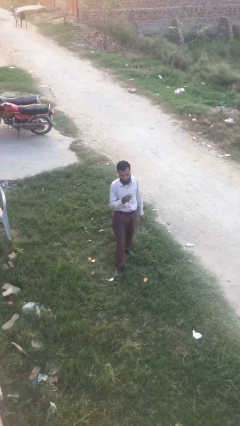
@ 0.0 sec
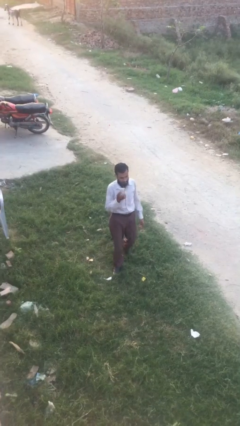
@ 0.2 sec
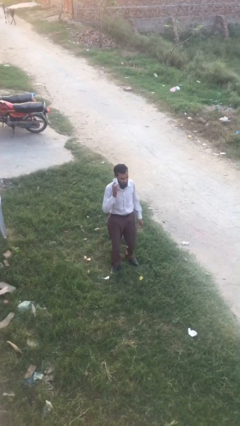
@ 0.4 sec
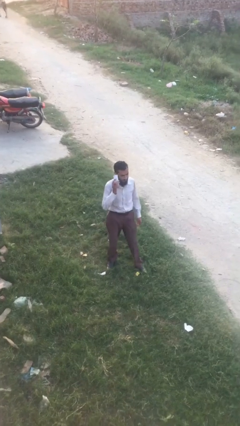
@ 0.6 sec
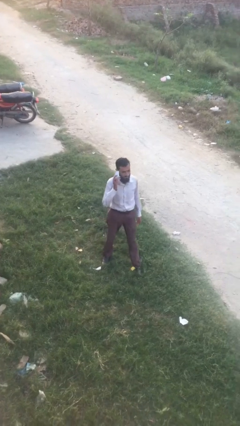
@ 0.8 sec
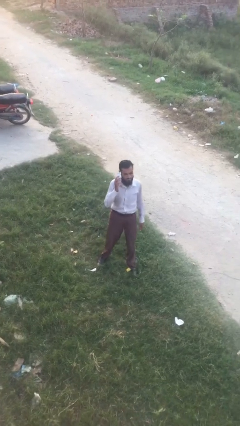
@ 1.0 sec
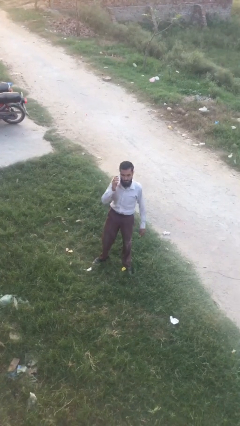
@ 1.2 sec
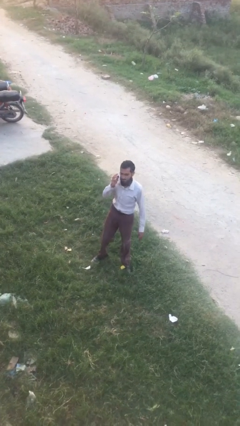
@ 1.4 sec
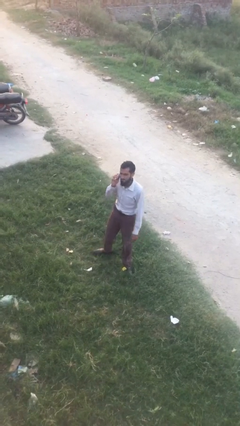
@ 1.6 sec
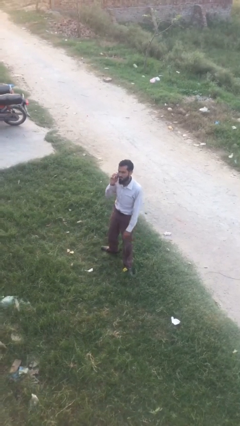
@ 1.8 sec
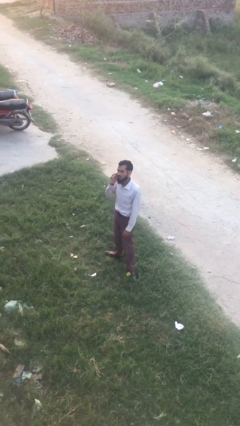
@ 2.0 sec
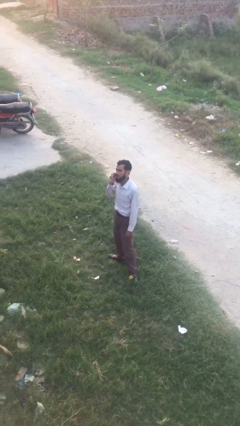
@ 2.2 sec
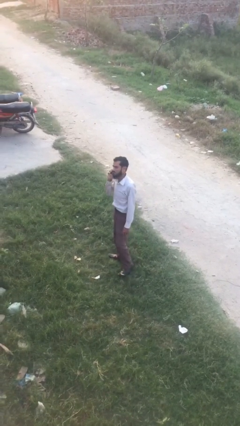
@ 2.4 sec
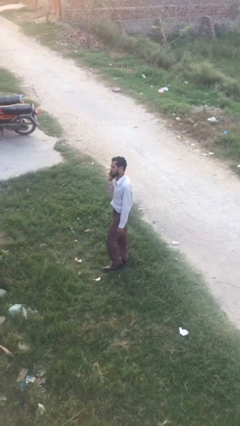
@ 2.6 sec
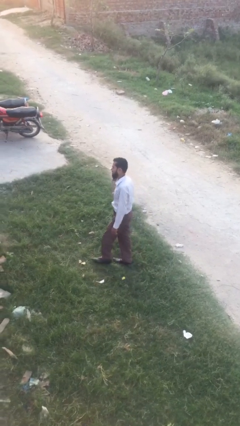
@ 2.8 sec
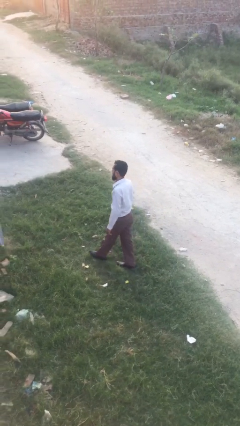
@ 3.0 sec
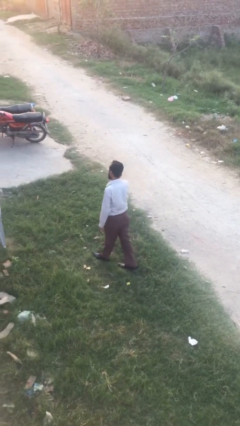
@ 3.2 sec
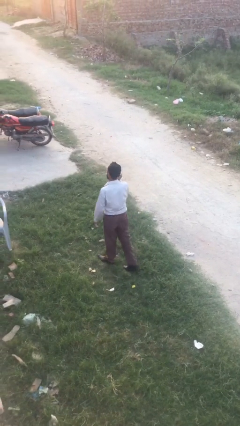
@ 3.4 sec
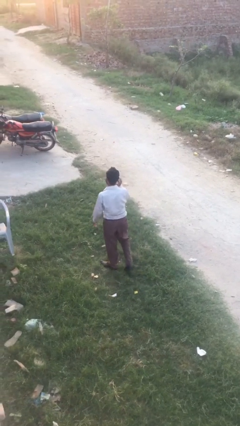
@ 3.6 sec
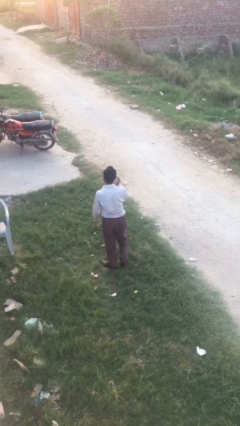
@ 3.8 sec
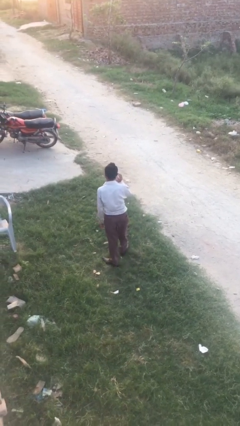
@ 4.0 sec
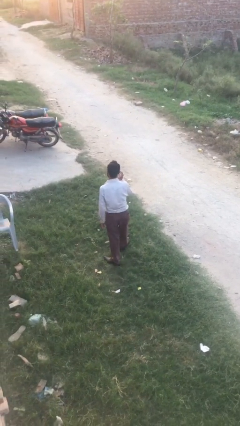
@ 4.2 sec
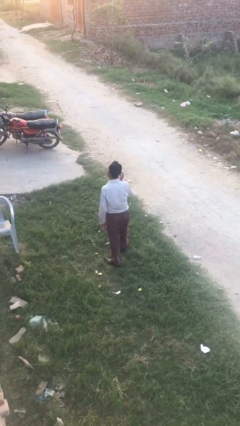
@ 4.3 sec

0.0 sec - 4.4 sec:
person talks on phone

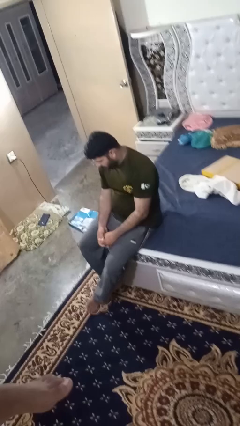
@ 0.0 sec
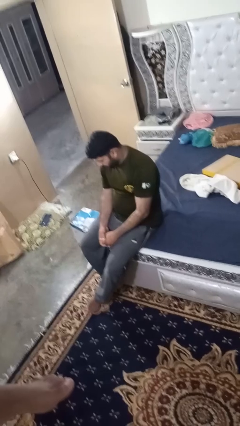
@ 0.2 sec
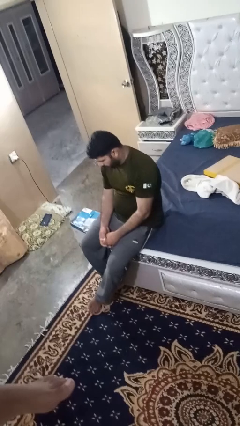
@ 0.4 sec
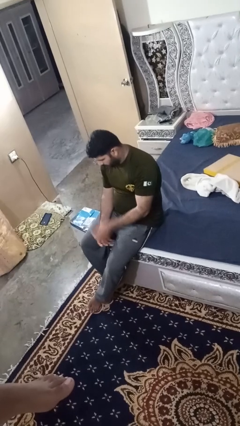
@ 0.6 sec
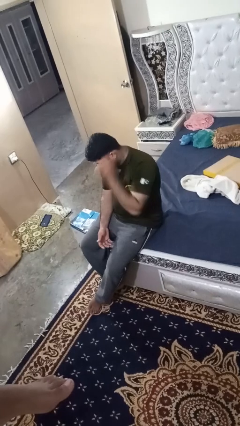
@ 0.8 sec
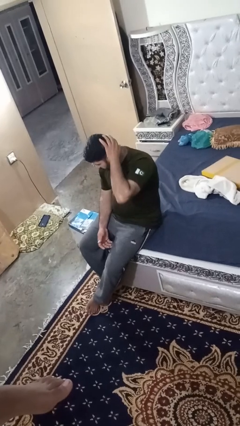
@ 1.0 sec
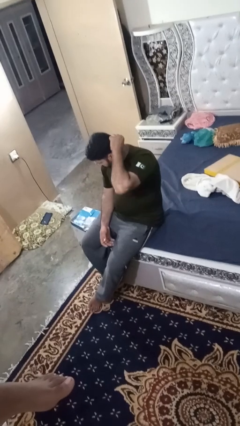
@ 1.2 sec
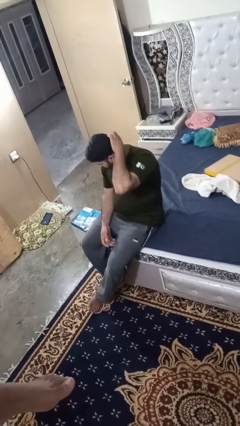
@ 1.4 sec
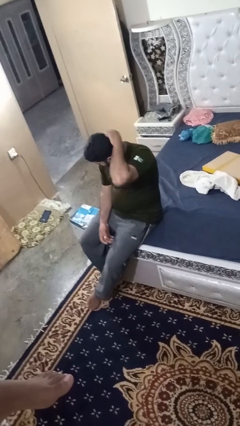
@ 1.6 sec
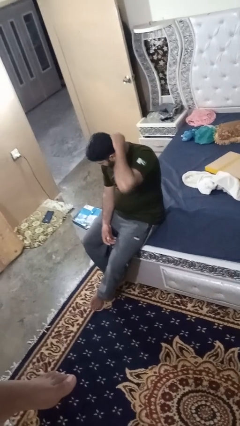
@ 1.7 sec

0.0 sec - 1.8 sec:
person strokes hair

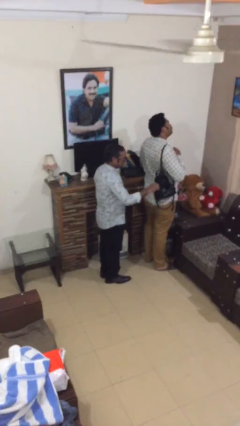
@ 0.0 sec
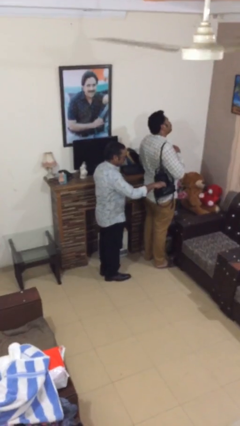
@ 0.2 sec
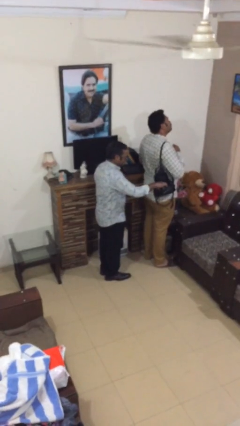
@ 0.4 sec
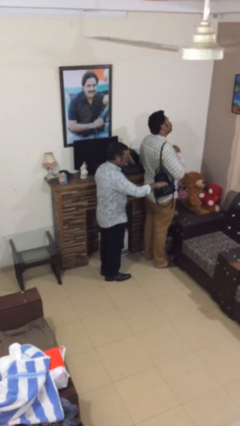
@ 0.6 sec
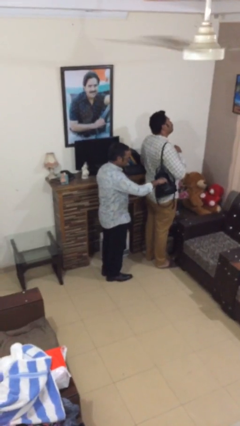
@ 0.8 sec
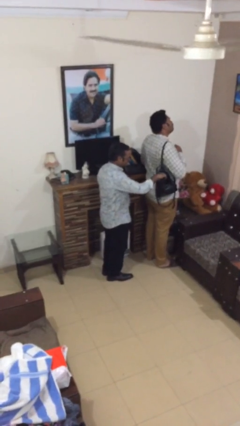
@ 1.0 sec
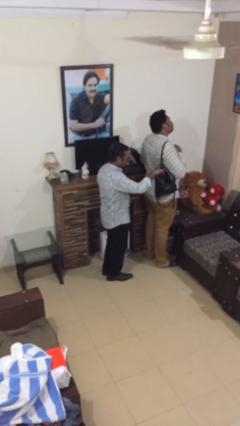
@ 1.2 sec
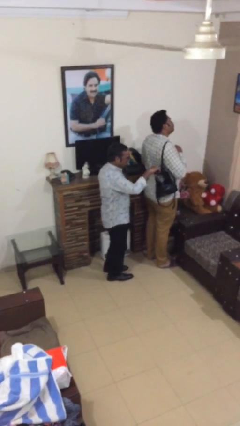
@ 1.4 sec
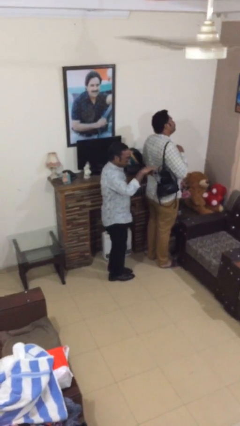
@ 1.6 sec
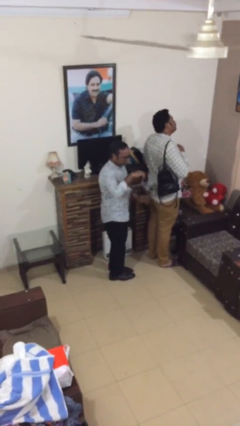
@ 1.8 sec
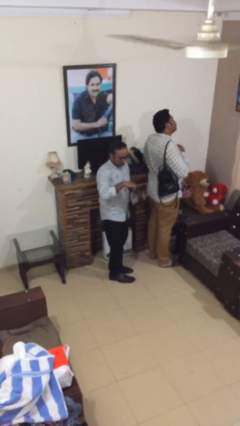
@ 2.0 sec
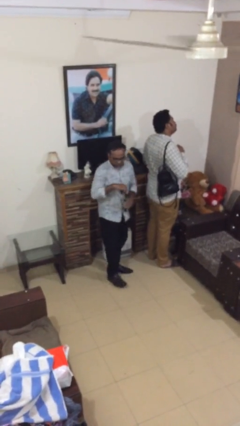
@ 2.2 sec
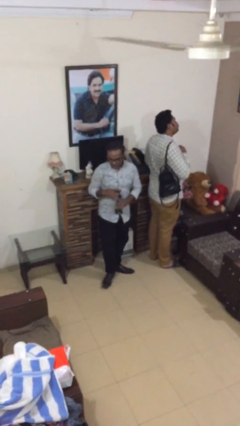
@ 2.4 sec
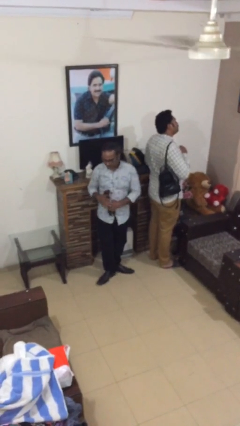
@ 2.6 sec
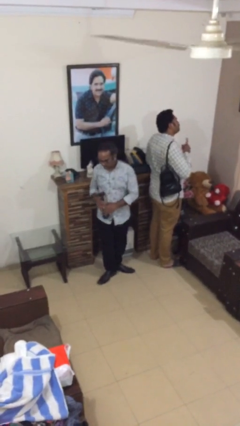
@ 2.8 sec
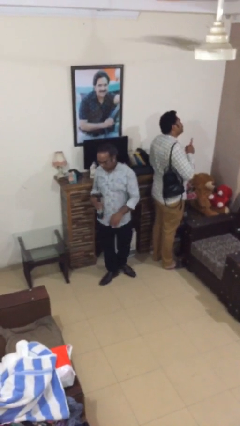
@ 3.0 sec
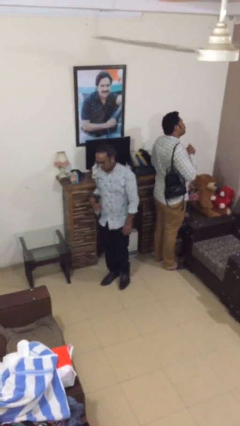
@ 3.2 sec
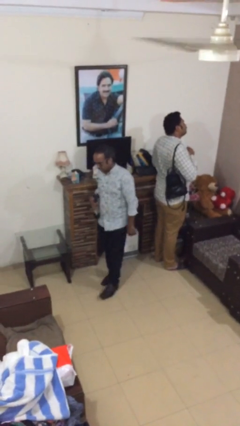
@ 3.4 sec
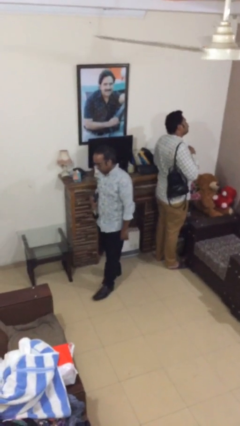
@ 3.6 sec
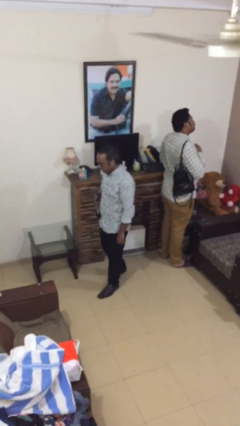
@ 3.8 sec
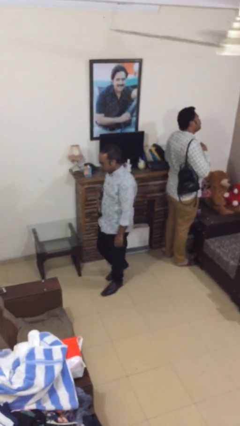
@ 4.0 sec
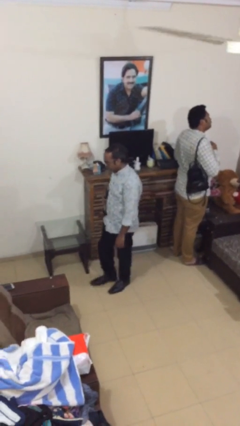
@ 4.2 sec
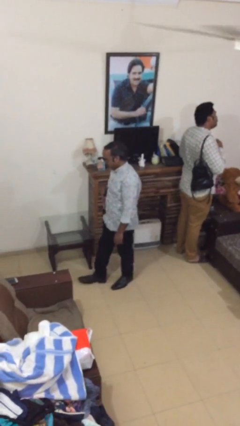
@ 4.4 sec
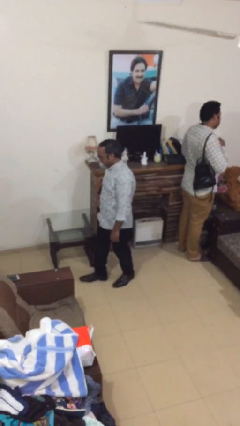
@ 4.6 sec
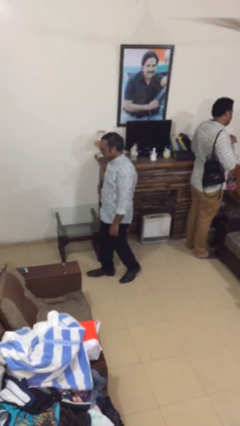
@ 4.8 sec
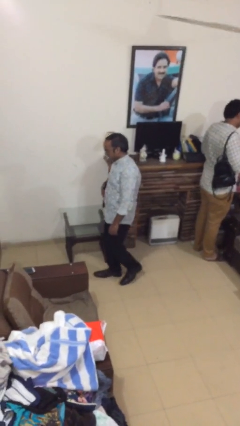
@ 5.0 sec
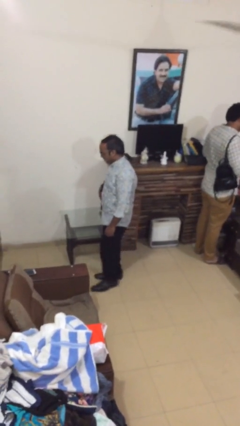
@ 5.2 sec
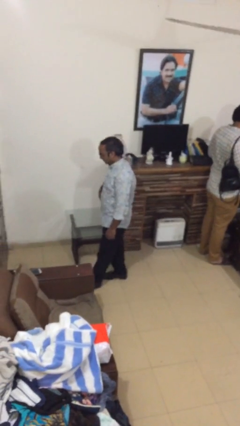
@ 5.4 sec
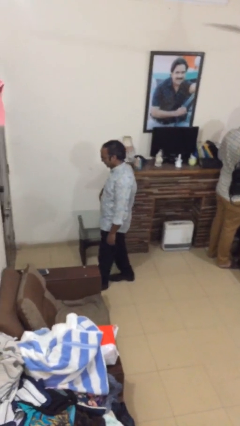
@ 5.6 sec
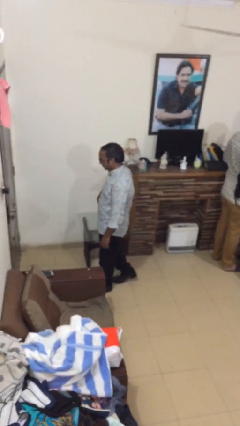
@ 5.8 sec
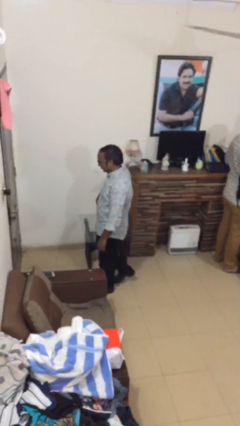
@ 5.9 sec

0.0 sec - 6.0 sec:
person steals object from person

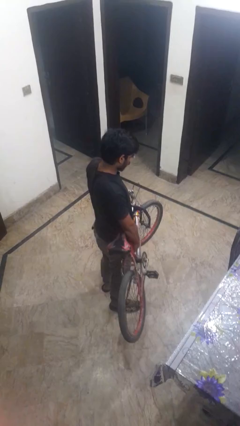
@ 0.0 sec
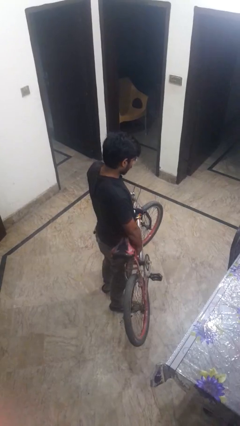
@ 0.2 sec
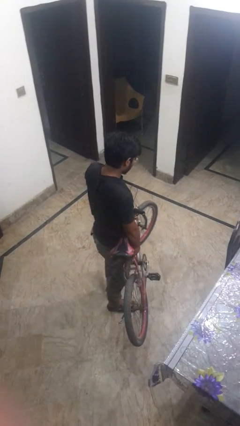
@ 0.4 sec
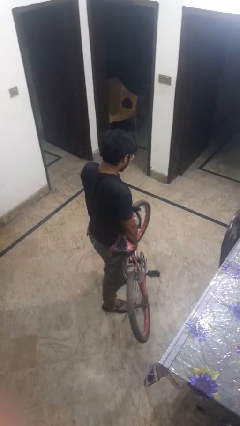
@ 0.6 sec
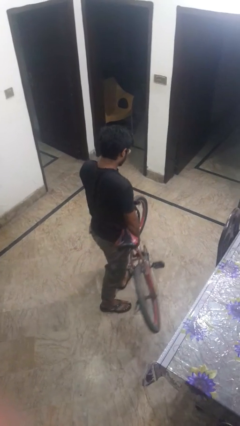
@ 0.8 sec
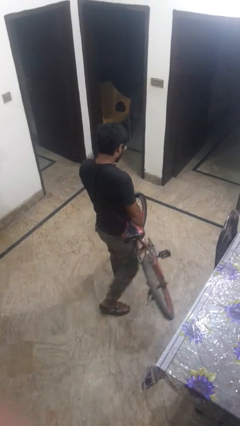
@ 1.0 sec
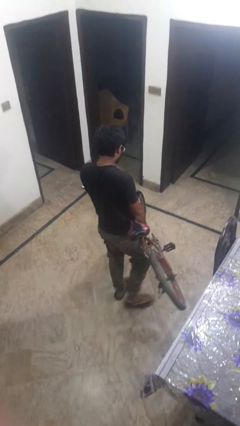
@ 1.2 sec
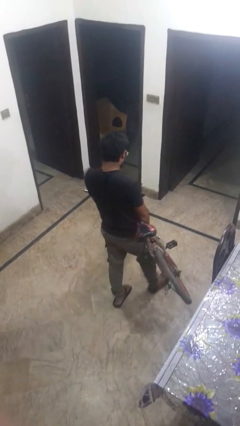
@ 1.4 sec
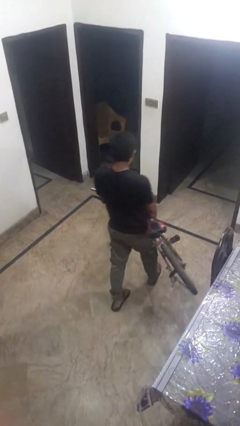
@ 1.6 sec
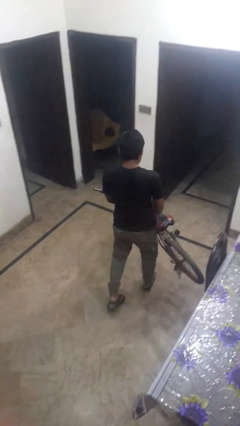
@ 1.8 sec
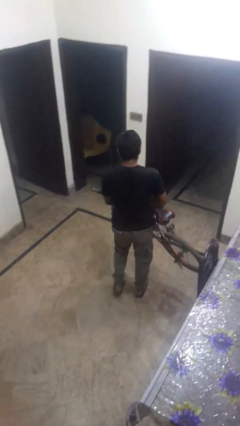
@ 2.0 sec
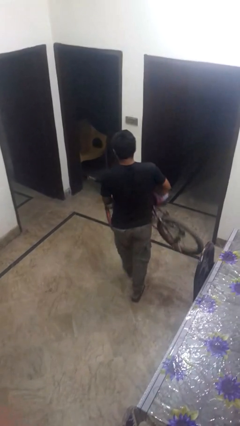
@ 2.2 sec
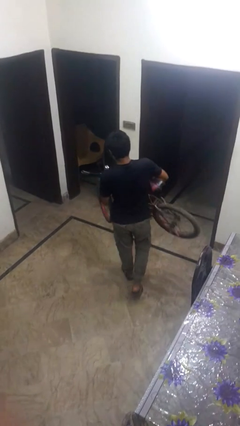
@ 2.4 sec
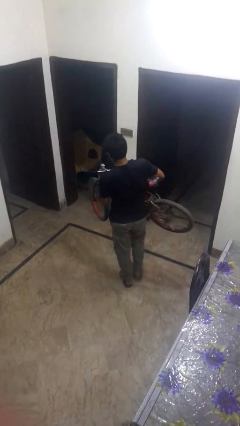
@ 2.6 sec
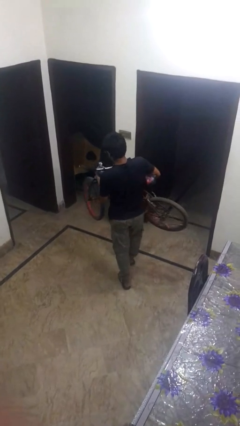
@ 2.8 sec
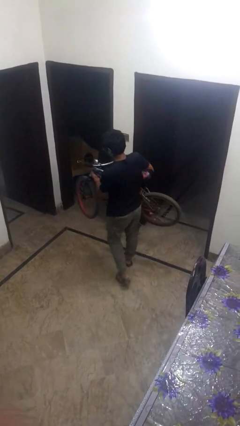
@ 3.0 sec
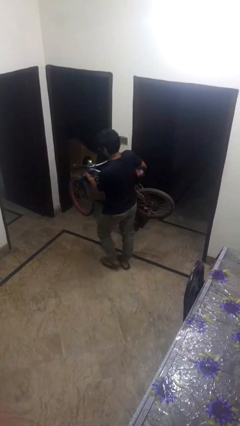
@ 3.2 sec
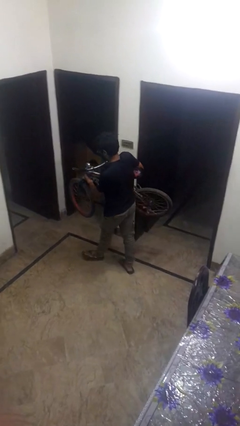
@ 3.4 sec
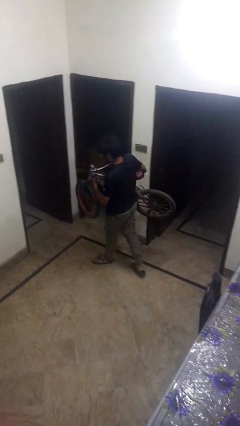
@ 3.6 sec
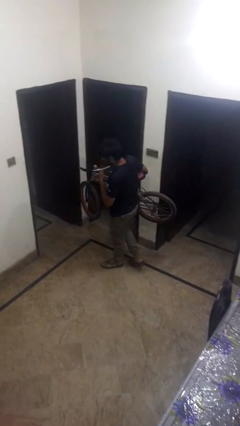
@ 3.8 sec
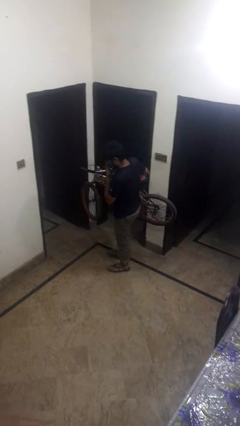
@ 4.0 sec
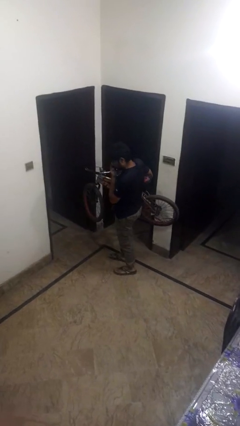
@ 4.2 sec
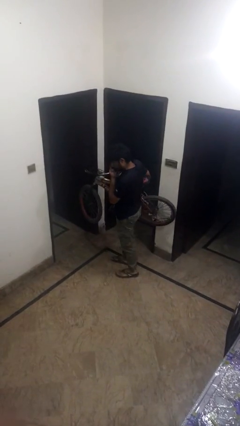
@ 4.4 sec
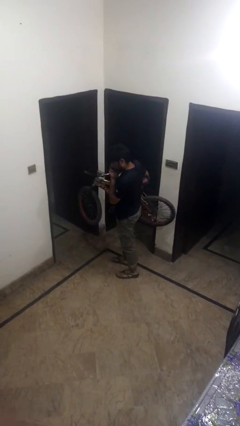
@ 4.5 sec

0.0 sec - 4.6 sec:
person carries bicycle

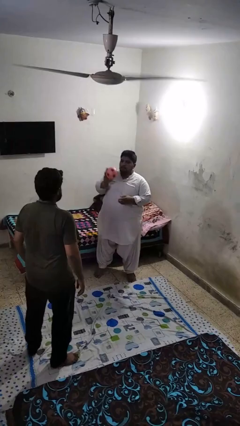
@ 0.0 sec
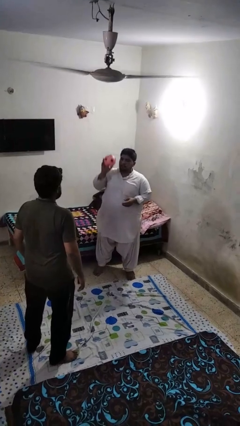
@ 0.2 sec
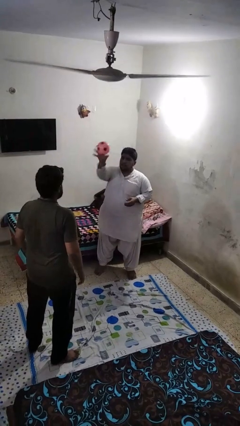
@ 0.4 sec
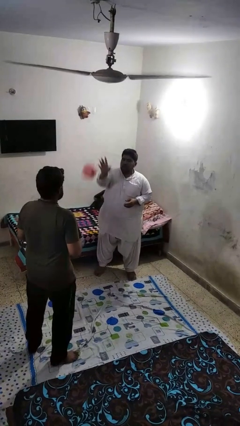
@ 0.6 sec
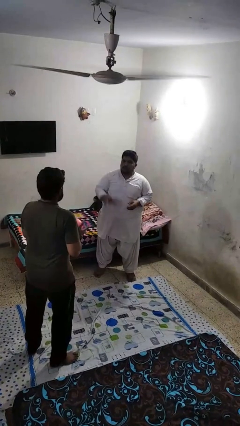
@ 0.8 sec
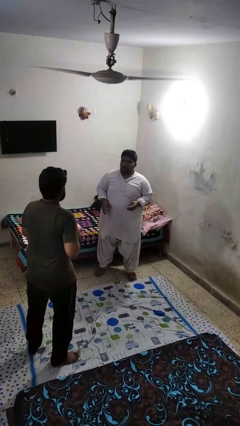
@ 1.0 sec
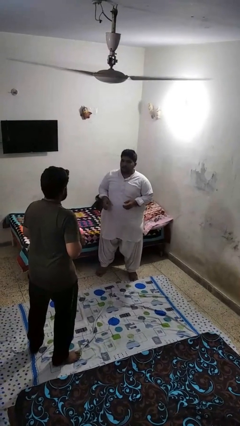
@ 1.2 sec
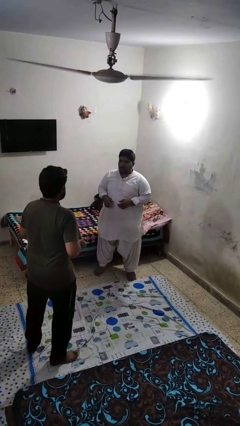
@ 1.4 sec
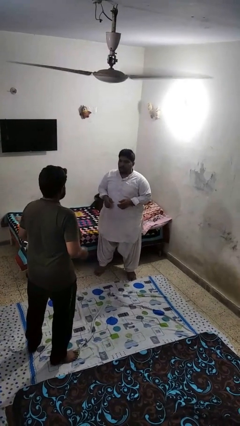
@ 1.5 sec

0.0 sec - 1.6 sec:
person throws object to person
